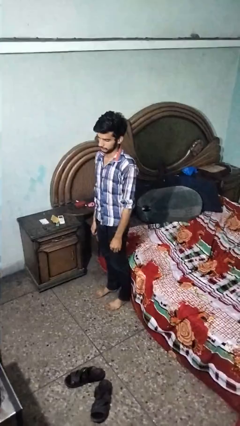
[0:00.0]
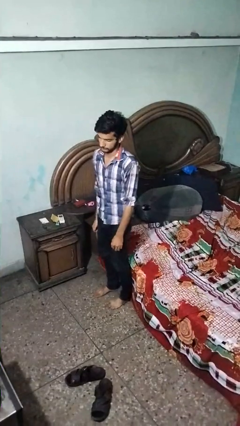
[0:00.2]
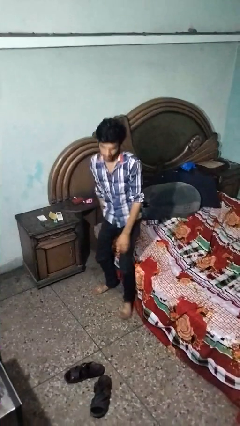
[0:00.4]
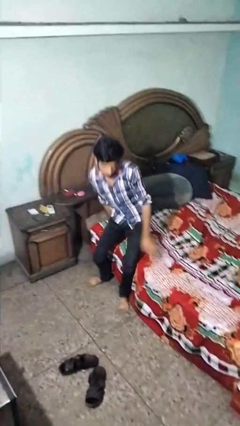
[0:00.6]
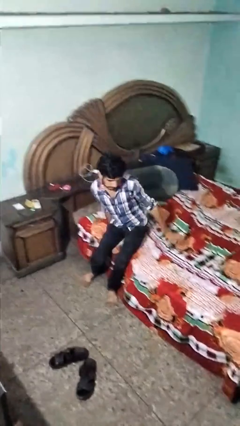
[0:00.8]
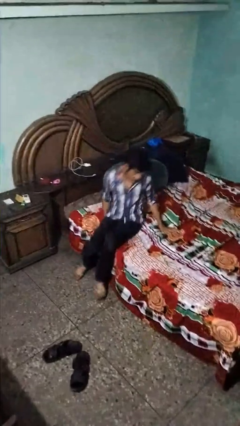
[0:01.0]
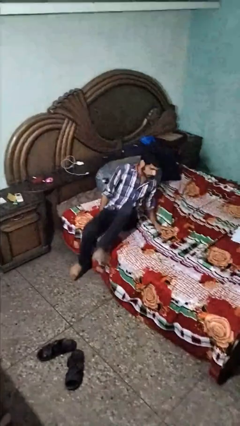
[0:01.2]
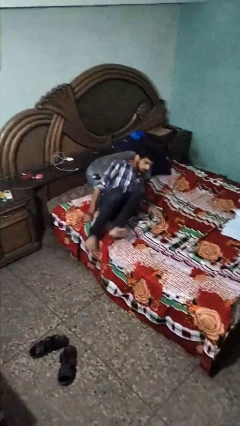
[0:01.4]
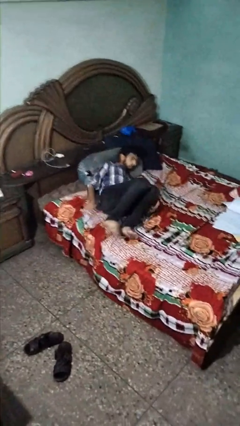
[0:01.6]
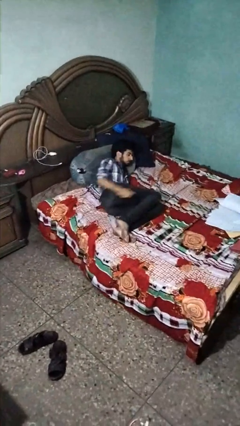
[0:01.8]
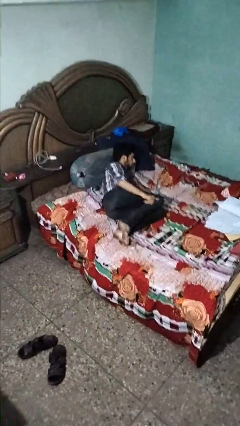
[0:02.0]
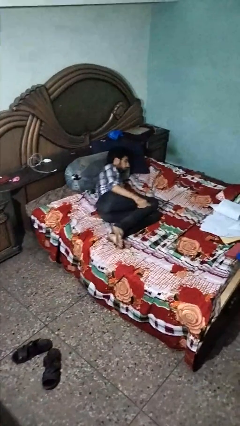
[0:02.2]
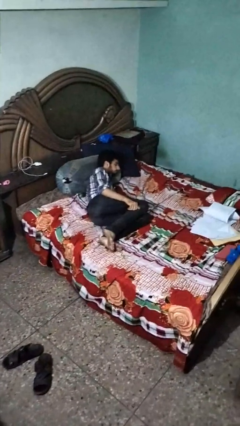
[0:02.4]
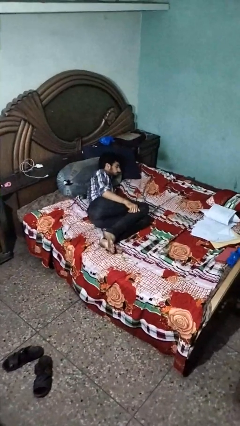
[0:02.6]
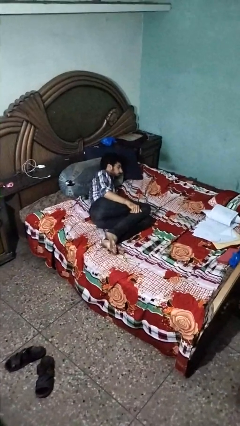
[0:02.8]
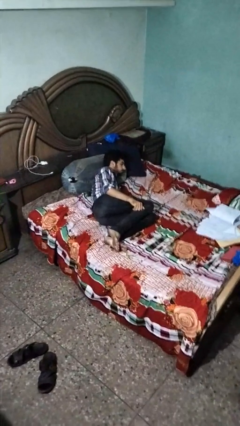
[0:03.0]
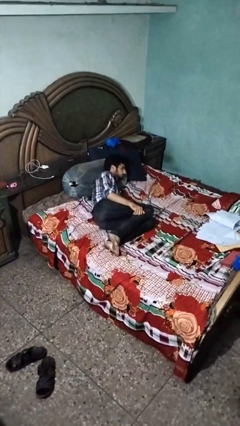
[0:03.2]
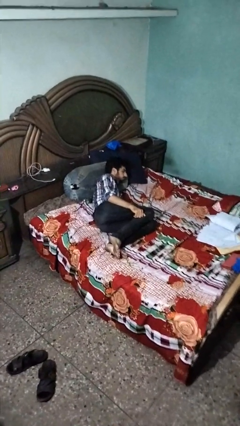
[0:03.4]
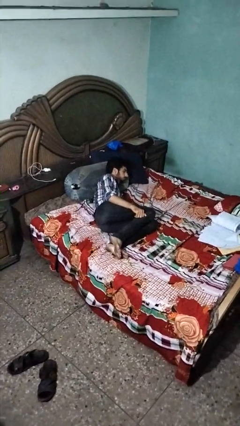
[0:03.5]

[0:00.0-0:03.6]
person lies down on bed

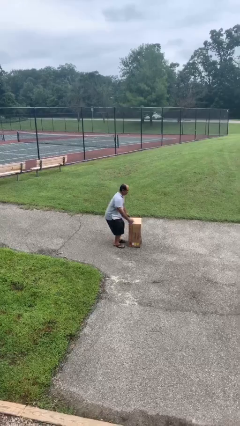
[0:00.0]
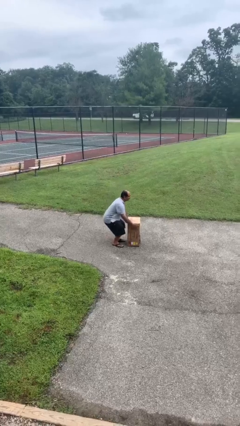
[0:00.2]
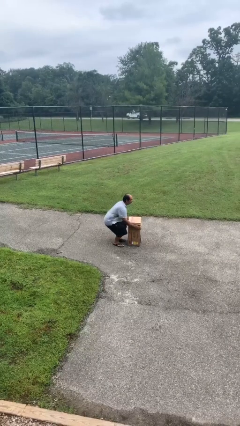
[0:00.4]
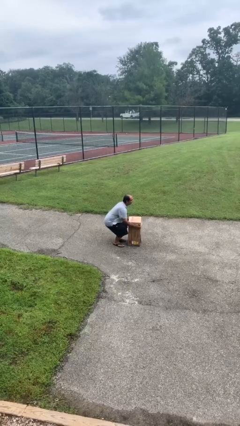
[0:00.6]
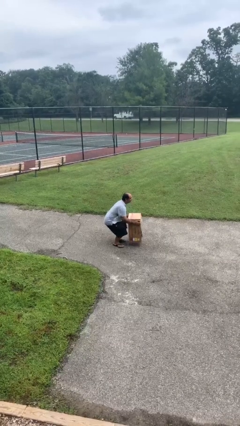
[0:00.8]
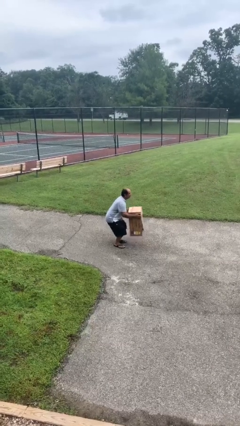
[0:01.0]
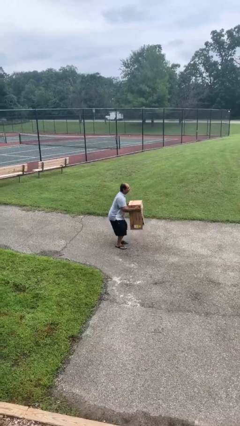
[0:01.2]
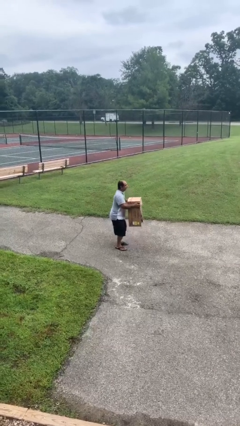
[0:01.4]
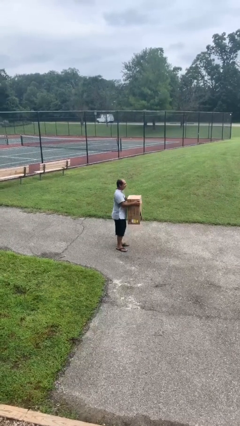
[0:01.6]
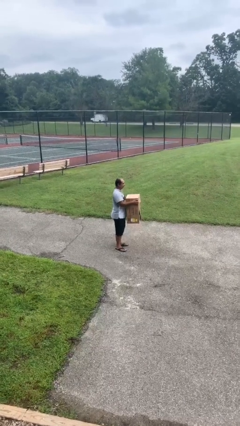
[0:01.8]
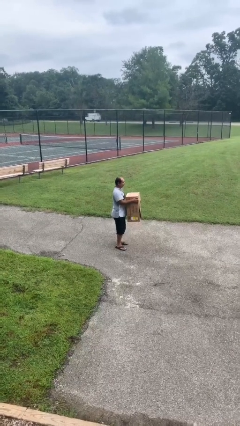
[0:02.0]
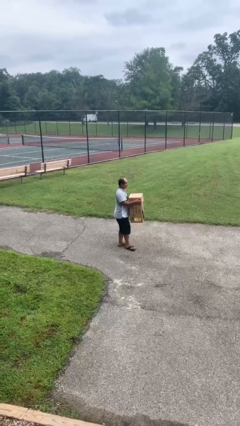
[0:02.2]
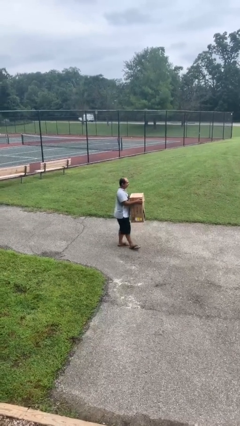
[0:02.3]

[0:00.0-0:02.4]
person picks up object from floor

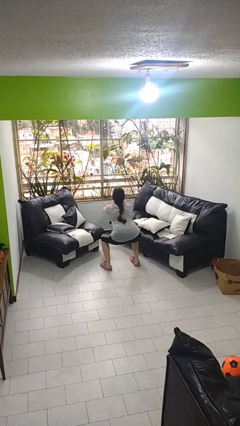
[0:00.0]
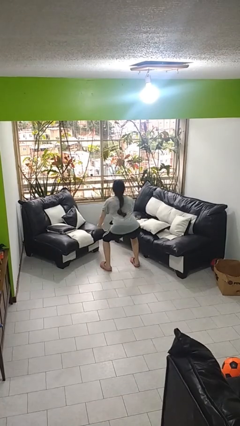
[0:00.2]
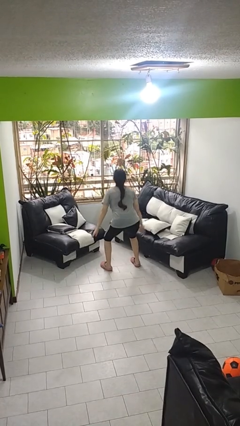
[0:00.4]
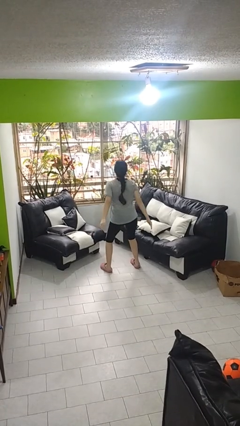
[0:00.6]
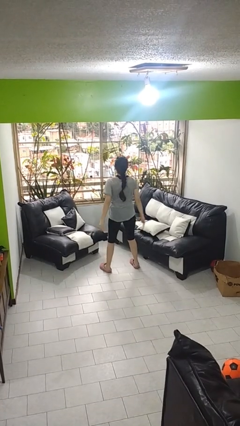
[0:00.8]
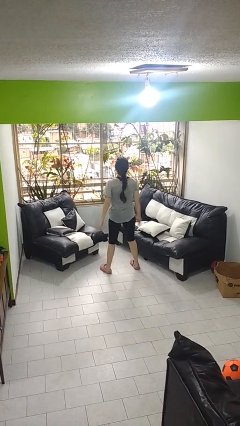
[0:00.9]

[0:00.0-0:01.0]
person stands up

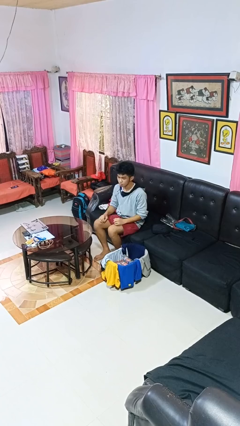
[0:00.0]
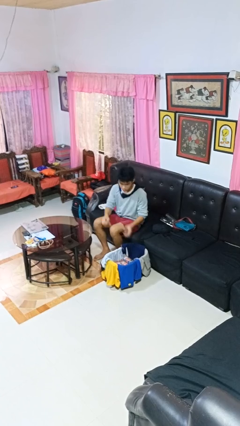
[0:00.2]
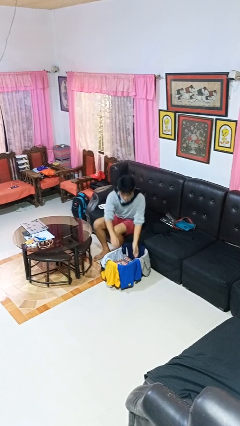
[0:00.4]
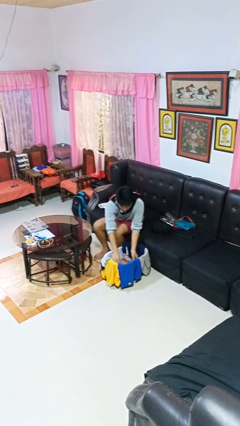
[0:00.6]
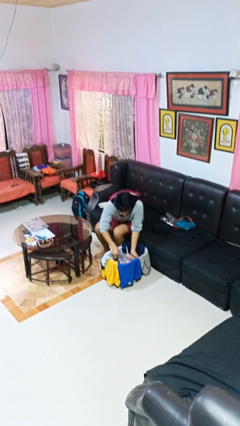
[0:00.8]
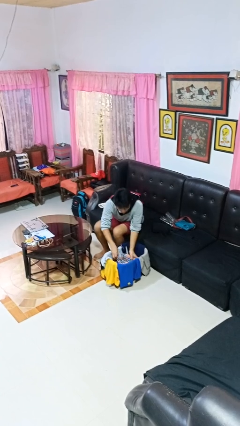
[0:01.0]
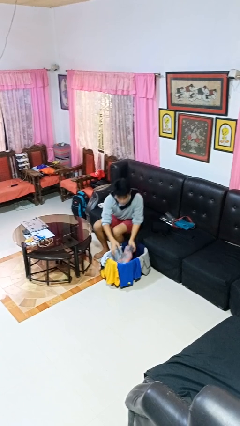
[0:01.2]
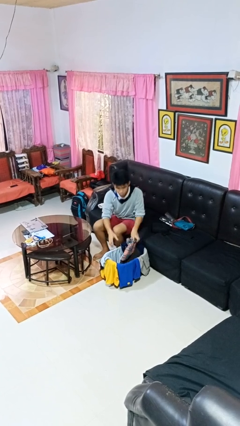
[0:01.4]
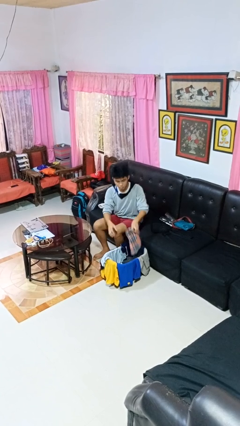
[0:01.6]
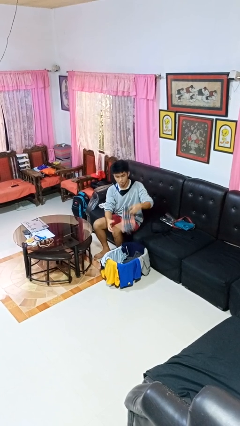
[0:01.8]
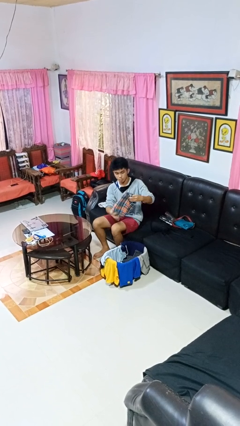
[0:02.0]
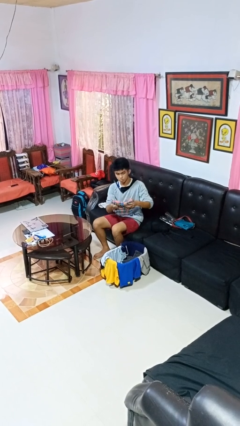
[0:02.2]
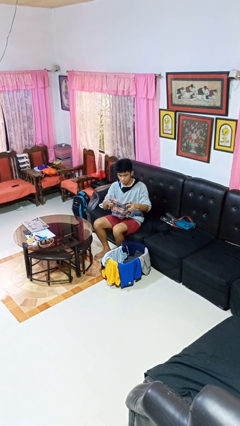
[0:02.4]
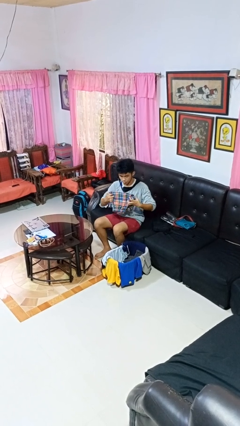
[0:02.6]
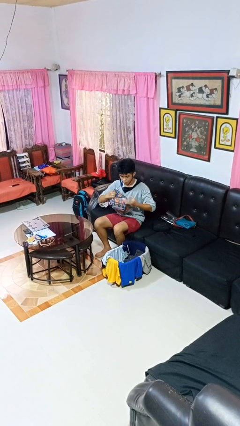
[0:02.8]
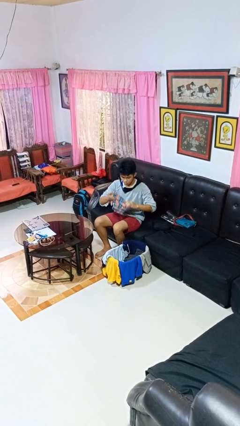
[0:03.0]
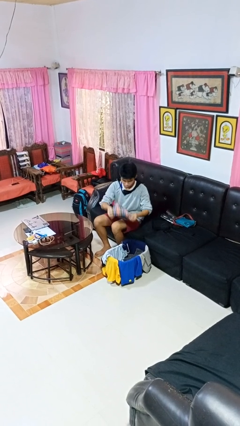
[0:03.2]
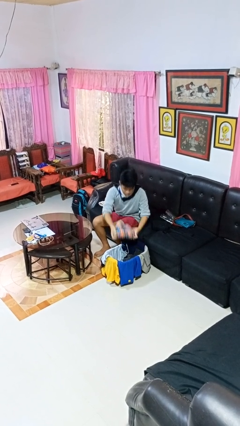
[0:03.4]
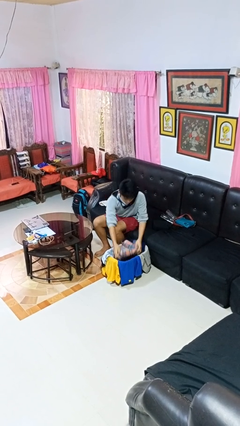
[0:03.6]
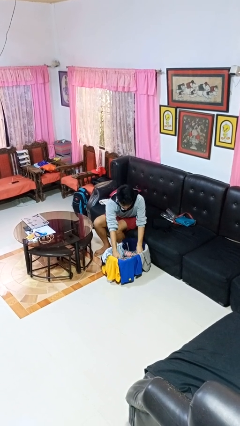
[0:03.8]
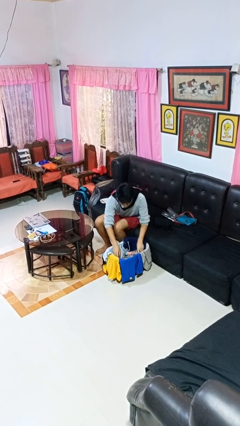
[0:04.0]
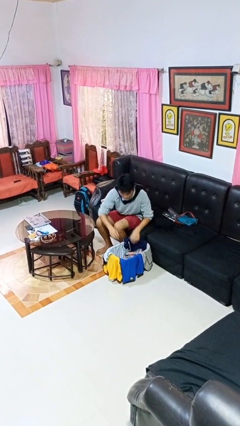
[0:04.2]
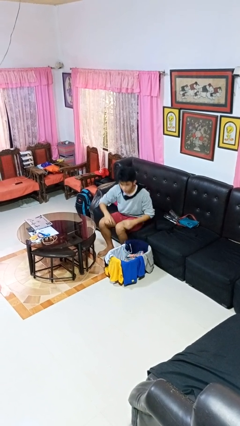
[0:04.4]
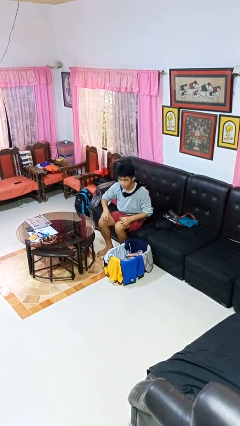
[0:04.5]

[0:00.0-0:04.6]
person folds pants

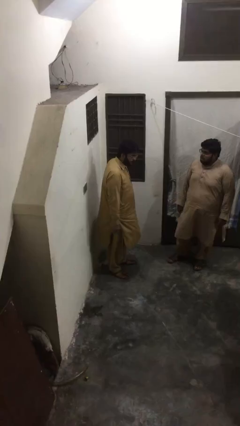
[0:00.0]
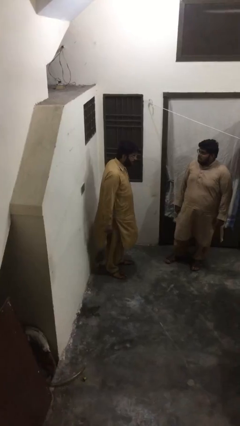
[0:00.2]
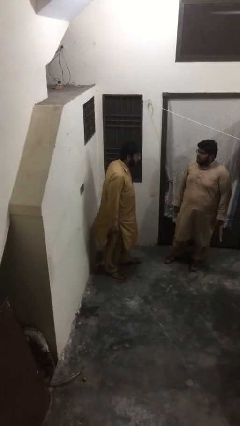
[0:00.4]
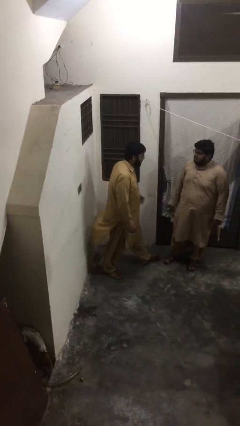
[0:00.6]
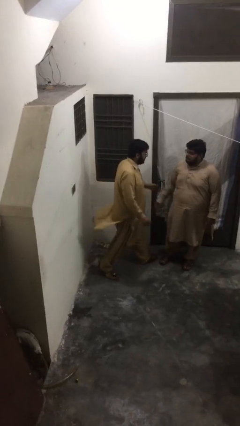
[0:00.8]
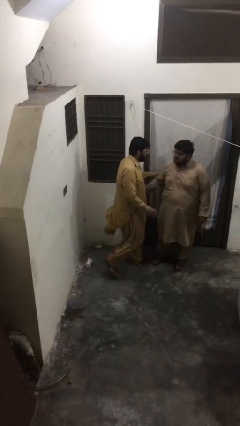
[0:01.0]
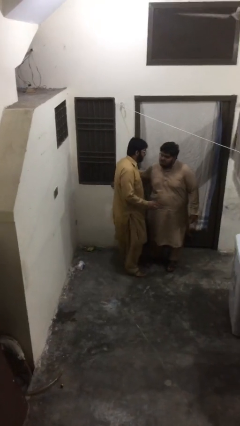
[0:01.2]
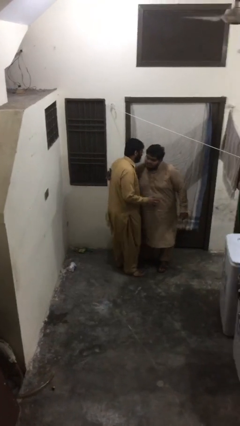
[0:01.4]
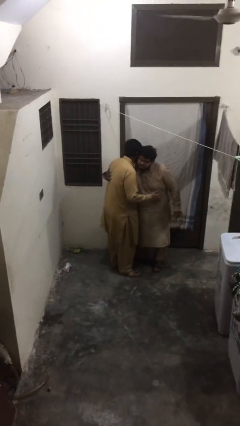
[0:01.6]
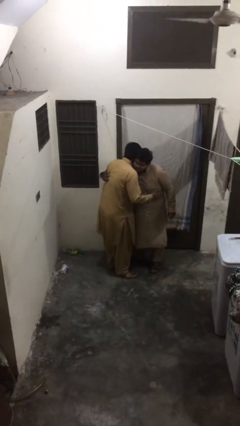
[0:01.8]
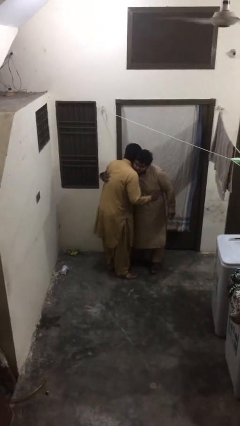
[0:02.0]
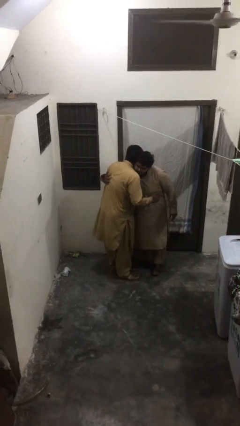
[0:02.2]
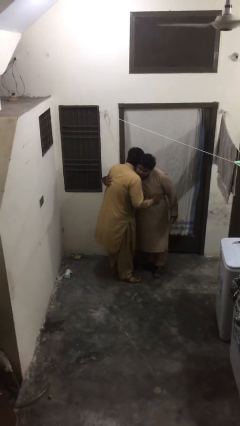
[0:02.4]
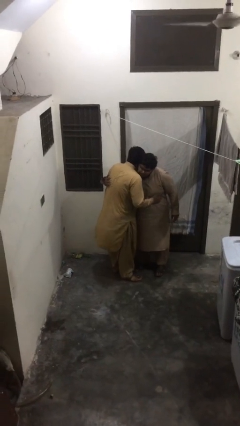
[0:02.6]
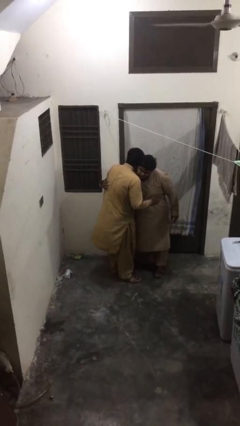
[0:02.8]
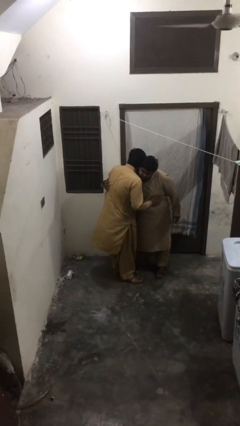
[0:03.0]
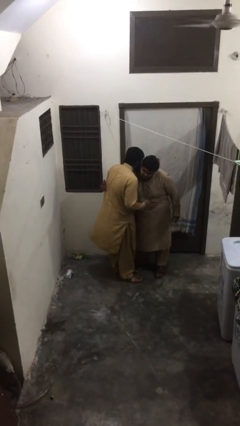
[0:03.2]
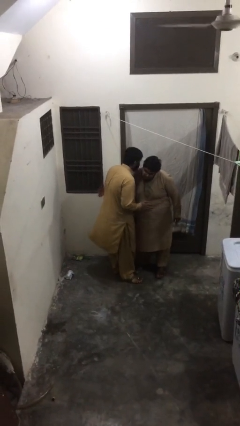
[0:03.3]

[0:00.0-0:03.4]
person embraces person

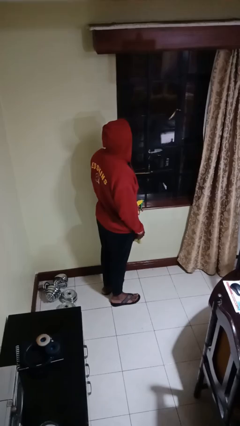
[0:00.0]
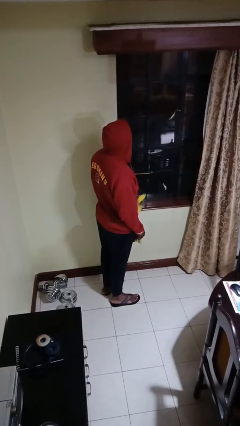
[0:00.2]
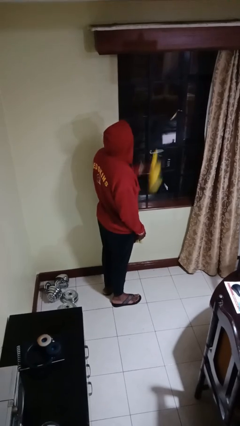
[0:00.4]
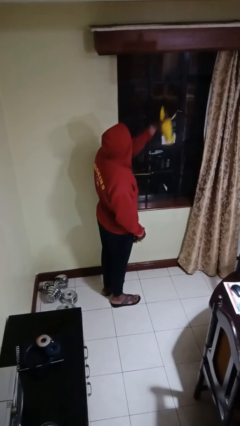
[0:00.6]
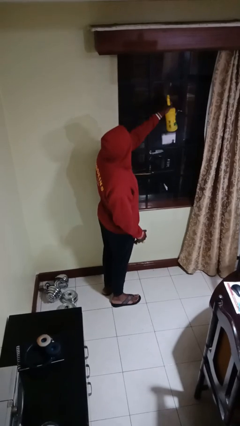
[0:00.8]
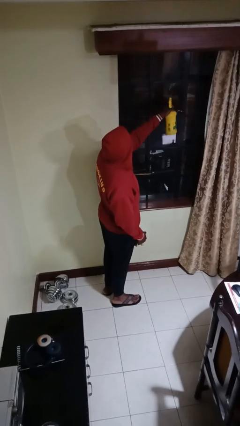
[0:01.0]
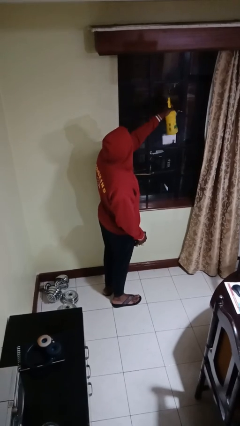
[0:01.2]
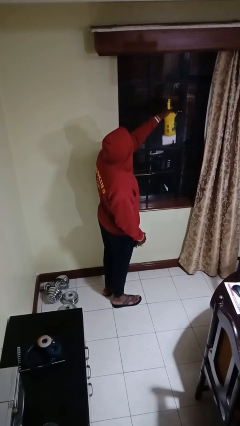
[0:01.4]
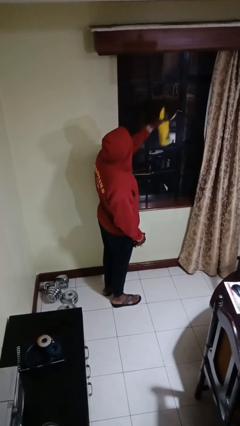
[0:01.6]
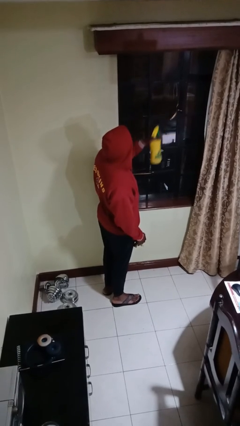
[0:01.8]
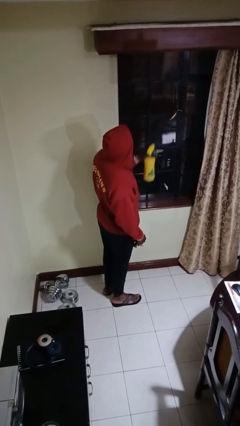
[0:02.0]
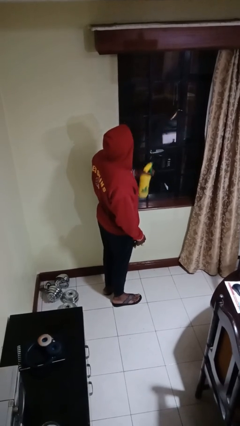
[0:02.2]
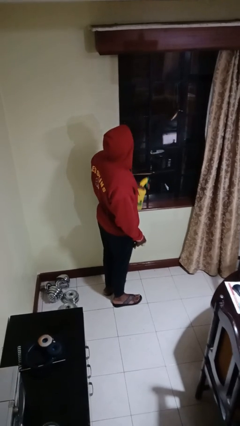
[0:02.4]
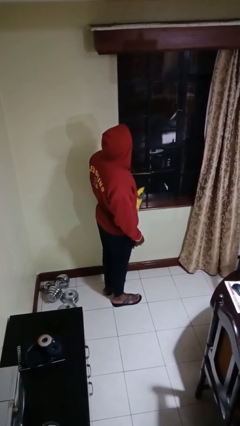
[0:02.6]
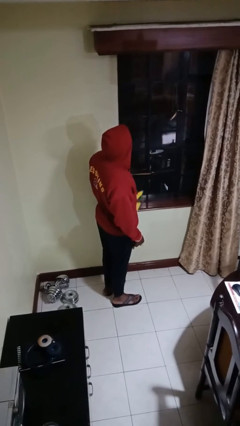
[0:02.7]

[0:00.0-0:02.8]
person sprays from bottle
